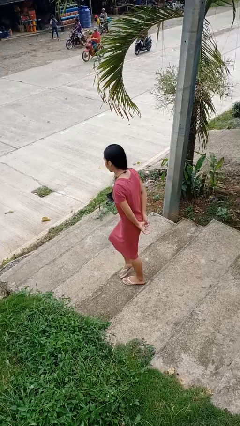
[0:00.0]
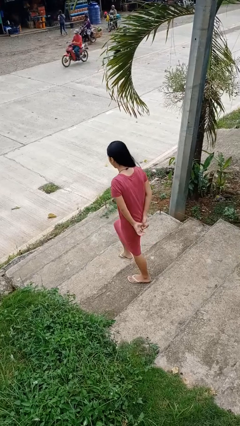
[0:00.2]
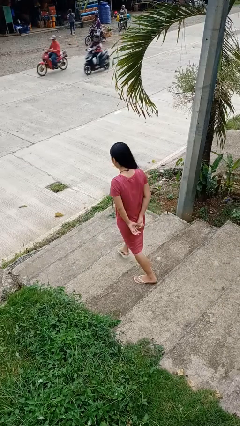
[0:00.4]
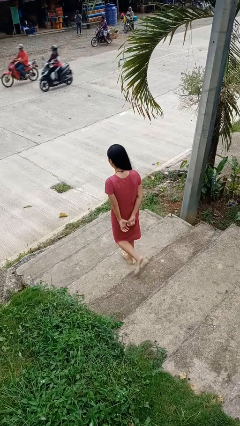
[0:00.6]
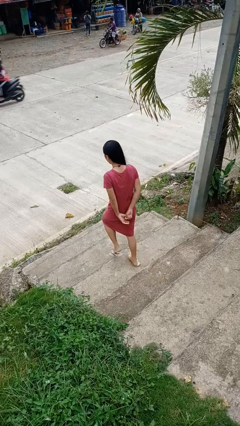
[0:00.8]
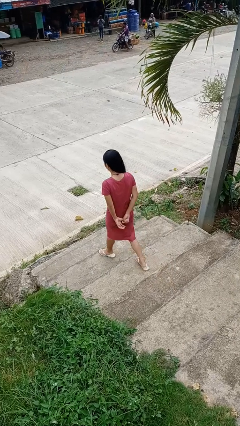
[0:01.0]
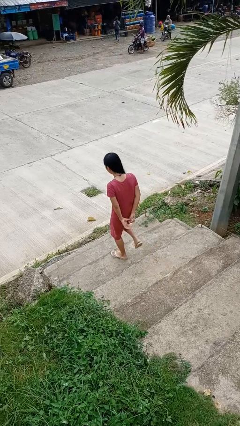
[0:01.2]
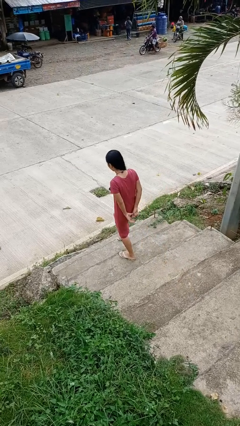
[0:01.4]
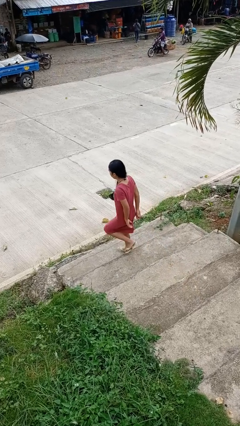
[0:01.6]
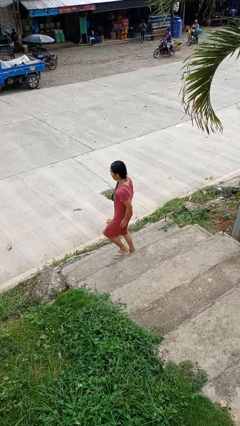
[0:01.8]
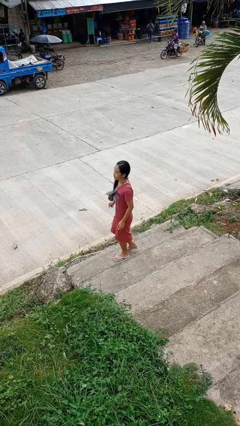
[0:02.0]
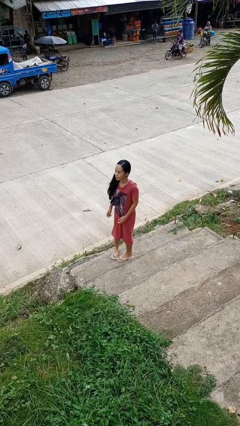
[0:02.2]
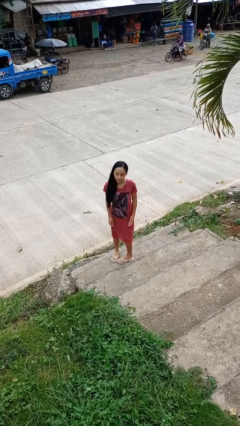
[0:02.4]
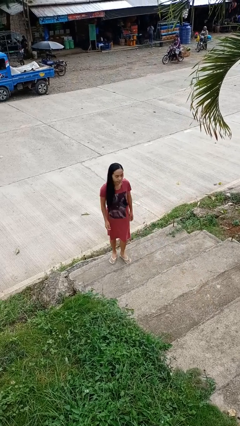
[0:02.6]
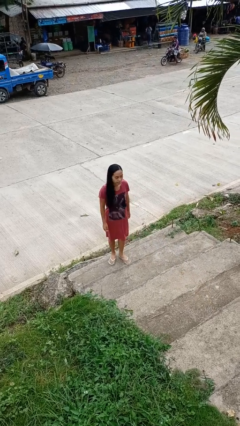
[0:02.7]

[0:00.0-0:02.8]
person climbs down stairs

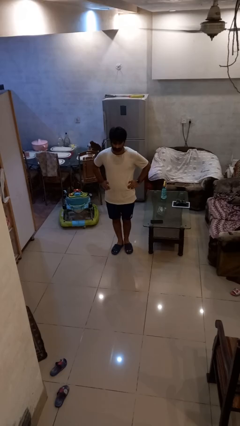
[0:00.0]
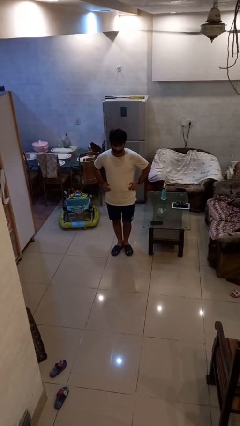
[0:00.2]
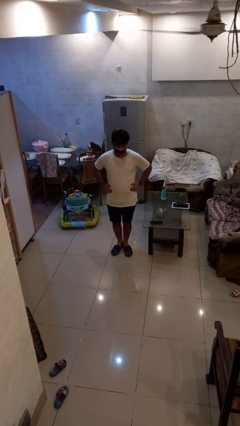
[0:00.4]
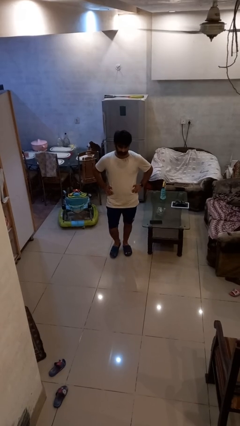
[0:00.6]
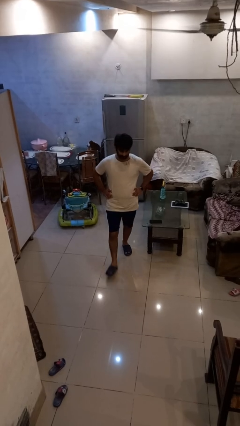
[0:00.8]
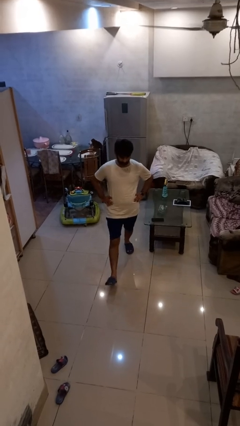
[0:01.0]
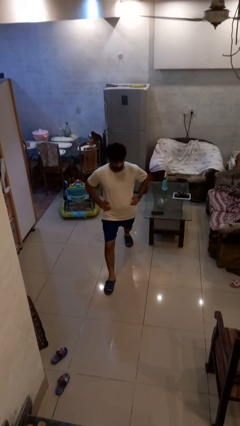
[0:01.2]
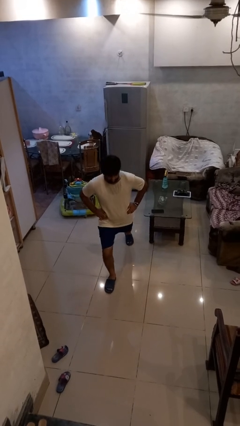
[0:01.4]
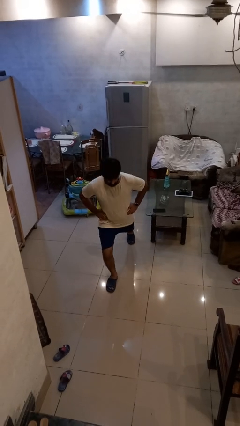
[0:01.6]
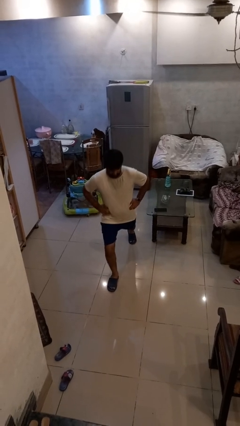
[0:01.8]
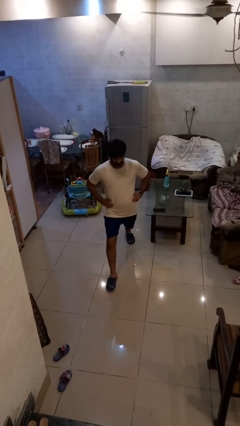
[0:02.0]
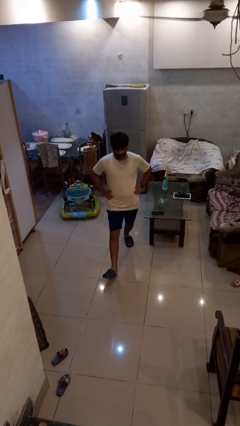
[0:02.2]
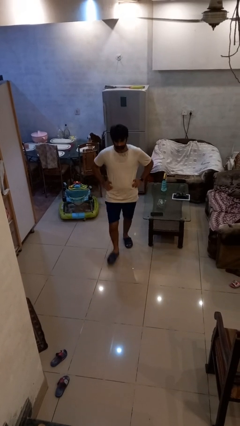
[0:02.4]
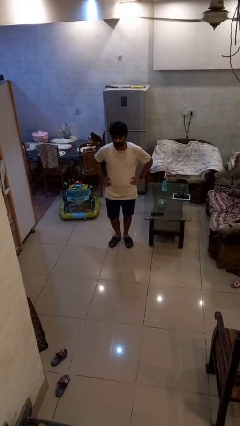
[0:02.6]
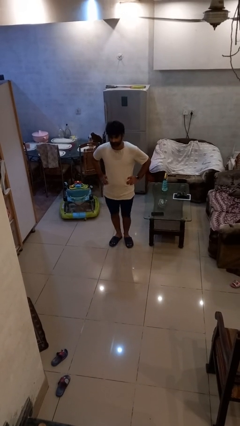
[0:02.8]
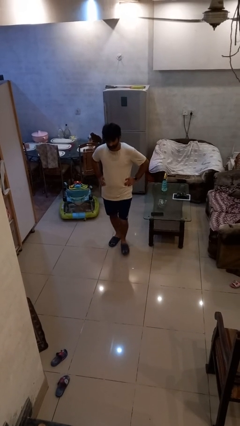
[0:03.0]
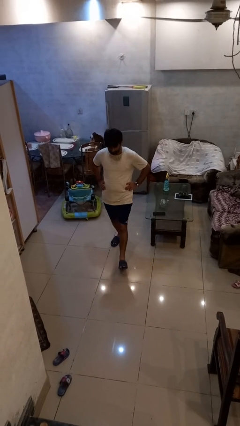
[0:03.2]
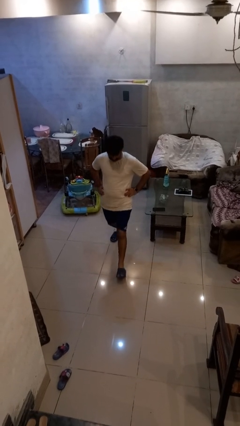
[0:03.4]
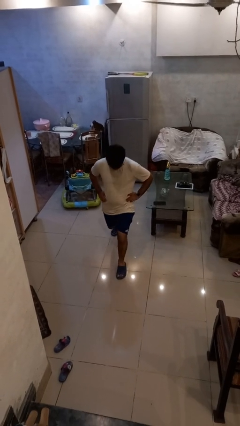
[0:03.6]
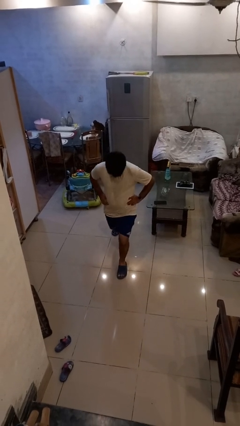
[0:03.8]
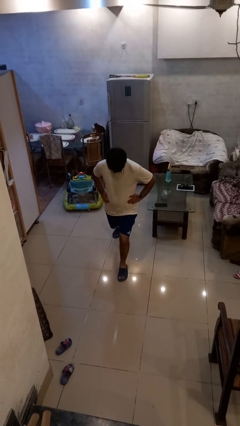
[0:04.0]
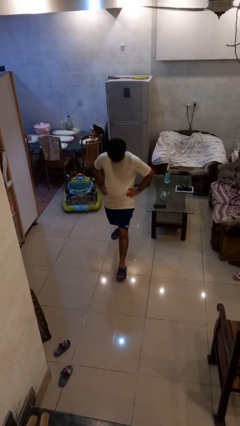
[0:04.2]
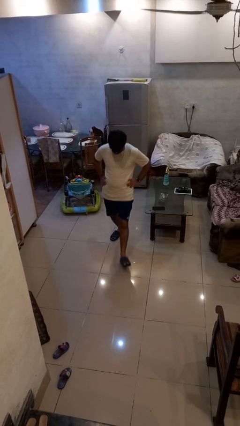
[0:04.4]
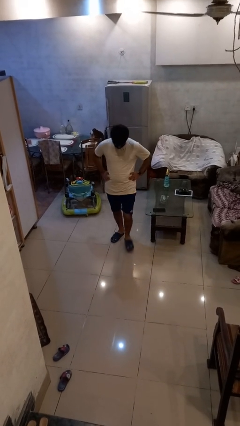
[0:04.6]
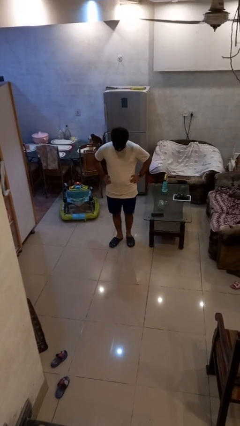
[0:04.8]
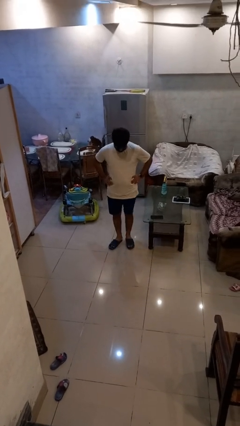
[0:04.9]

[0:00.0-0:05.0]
person exercises with lunges

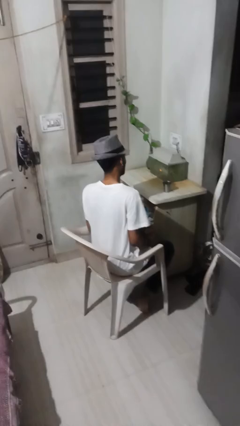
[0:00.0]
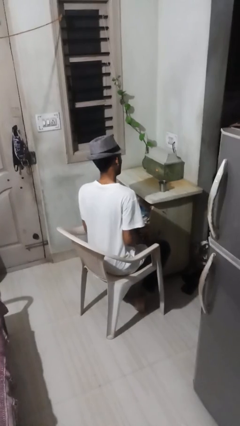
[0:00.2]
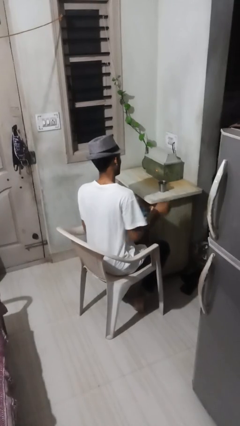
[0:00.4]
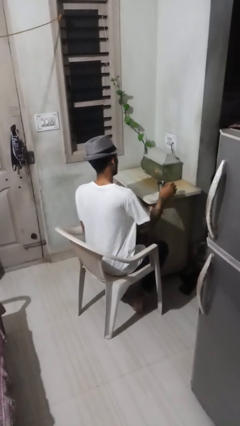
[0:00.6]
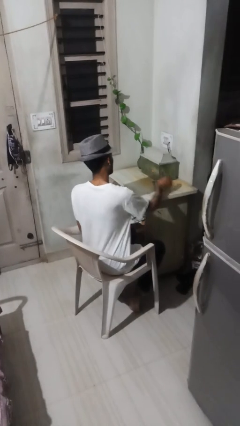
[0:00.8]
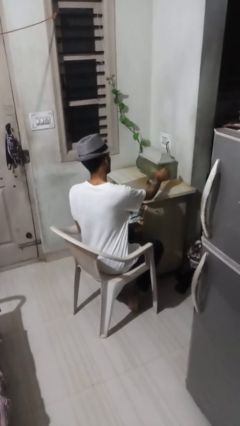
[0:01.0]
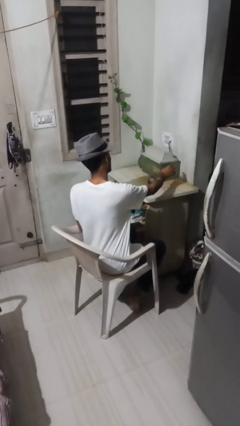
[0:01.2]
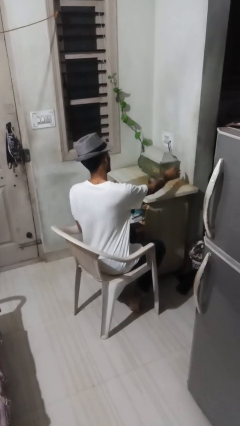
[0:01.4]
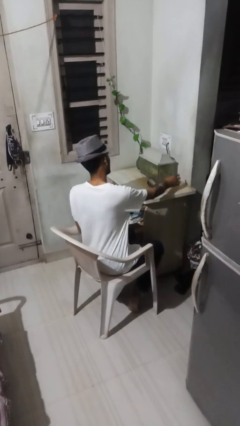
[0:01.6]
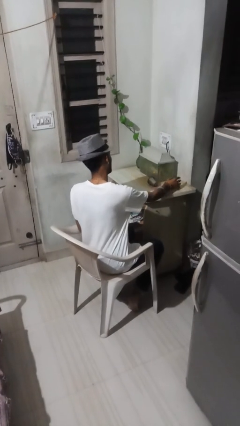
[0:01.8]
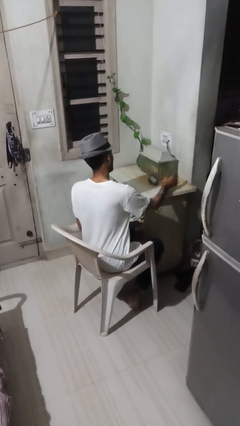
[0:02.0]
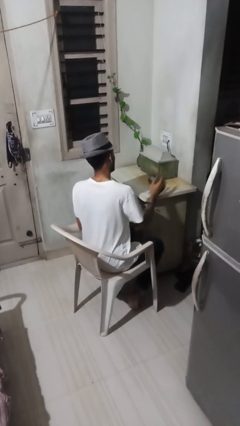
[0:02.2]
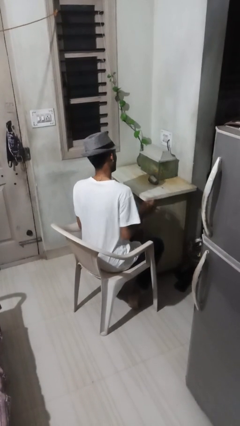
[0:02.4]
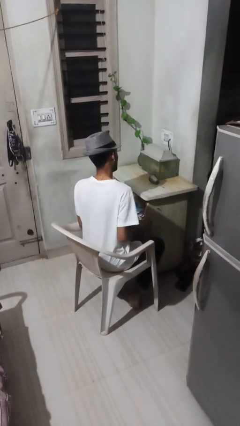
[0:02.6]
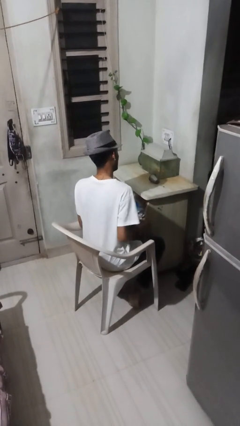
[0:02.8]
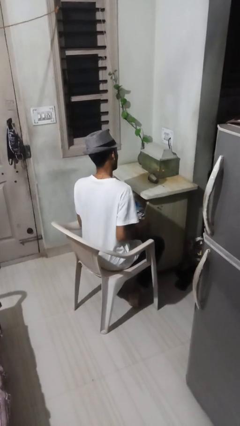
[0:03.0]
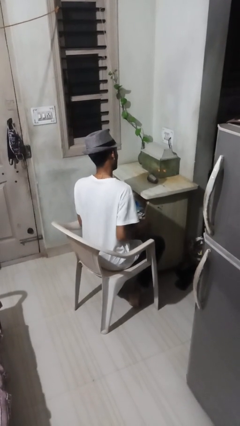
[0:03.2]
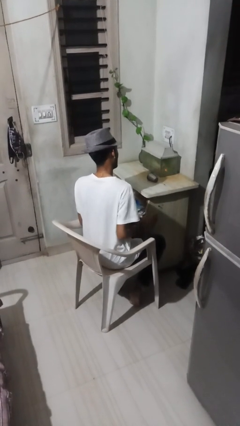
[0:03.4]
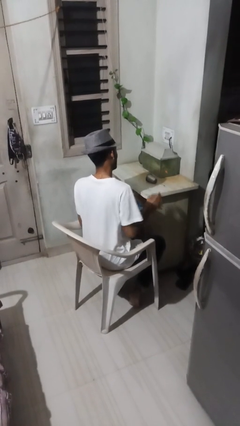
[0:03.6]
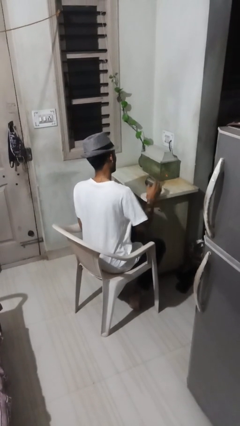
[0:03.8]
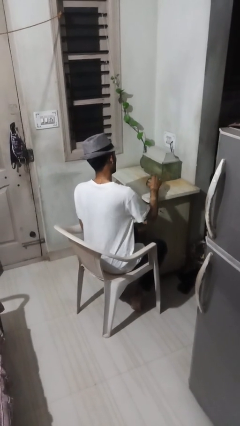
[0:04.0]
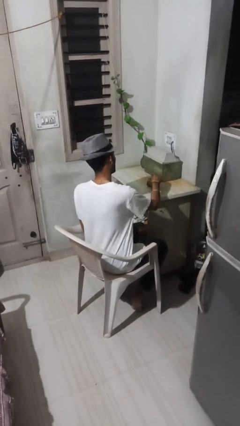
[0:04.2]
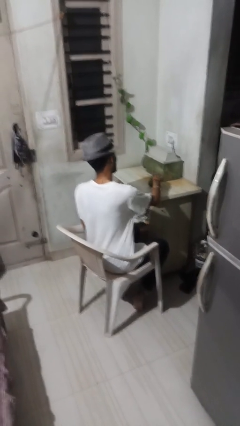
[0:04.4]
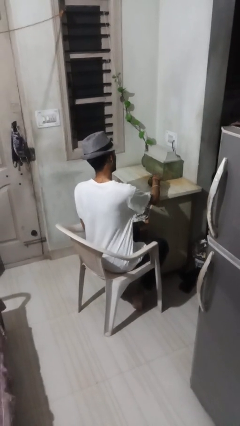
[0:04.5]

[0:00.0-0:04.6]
person knocks over glass

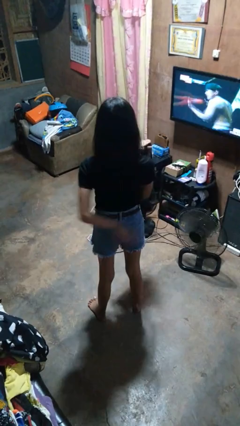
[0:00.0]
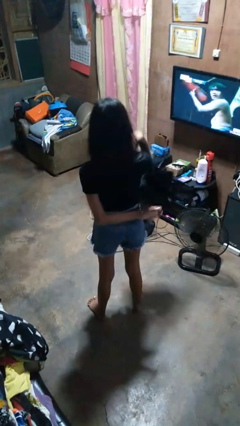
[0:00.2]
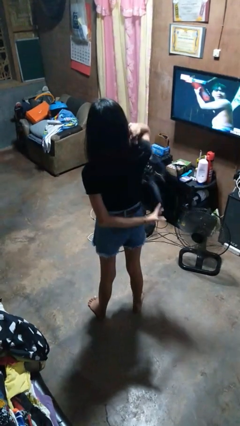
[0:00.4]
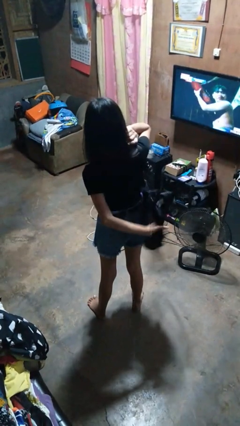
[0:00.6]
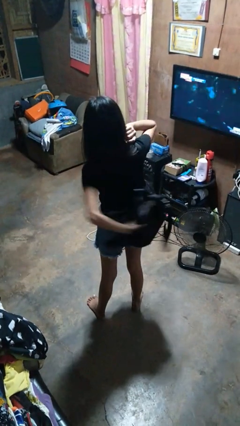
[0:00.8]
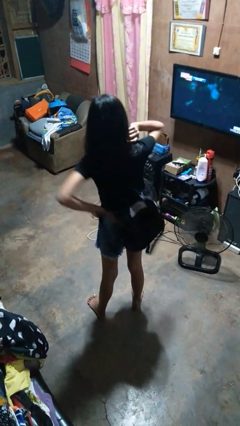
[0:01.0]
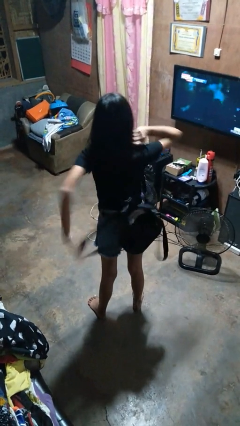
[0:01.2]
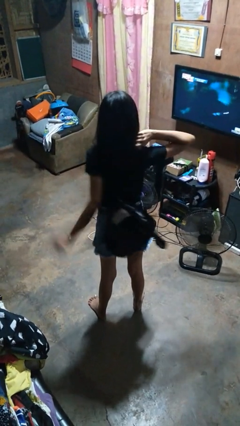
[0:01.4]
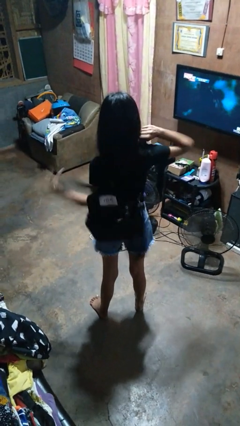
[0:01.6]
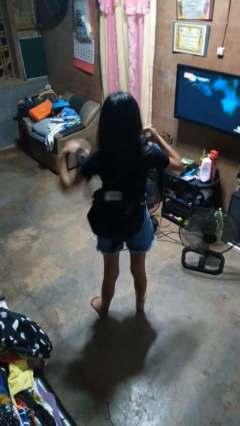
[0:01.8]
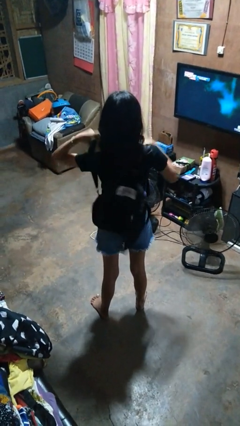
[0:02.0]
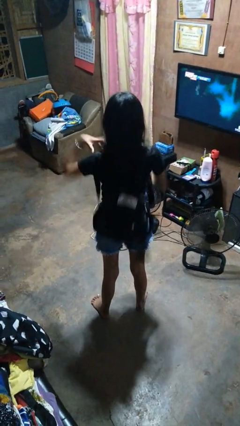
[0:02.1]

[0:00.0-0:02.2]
person puts on backpack

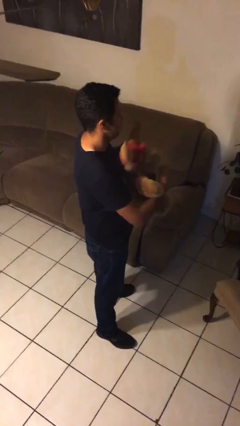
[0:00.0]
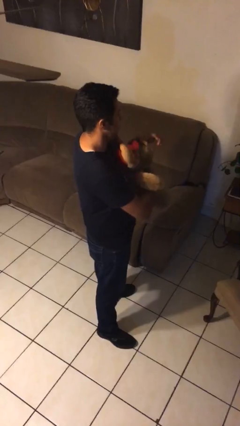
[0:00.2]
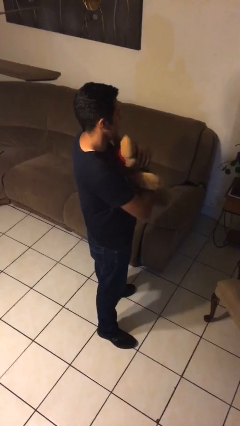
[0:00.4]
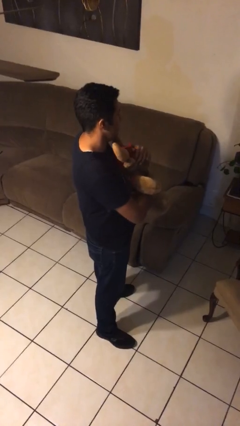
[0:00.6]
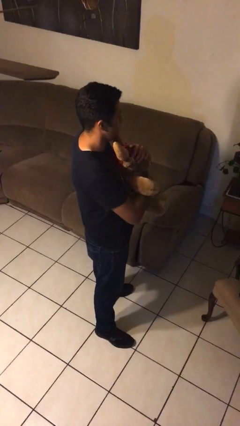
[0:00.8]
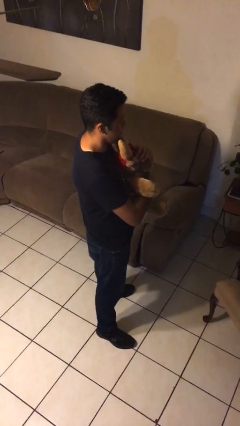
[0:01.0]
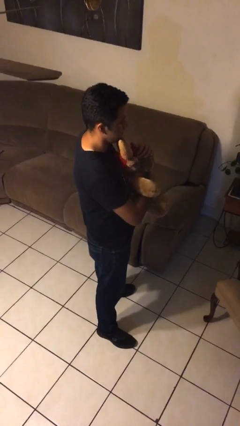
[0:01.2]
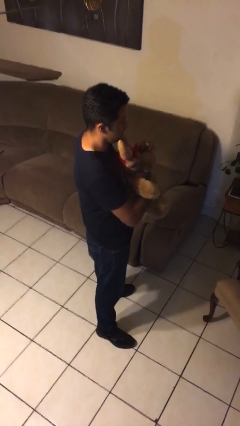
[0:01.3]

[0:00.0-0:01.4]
person hugs stuffed animal

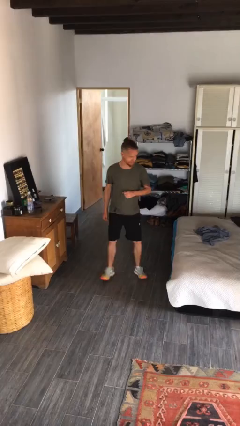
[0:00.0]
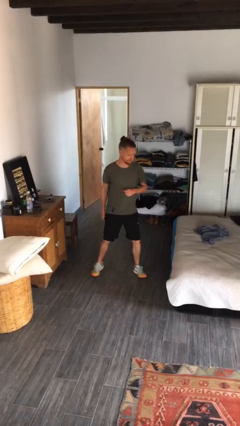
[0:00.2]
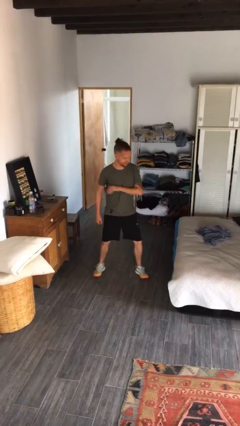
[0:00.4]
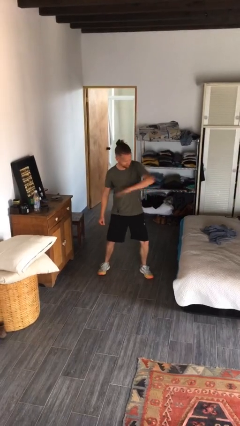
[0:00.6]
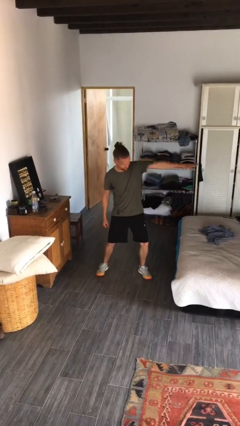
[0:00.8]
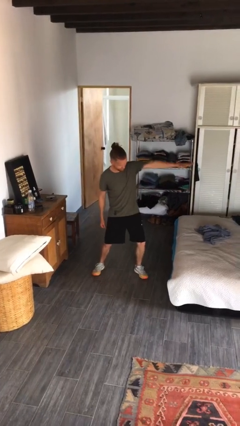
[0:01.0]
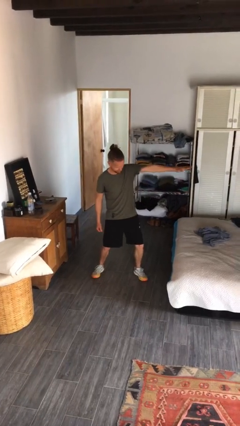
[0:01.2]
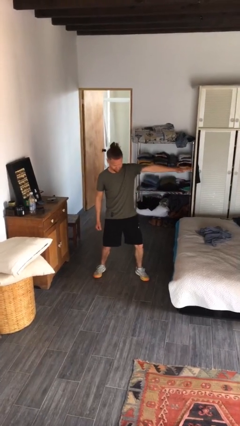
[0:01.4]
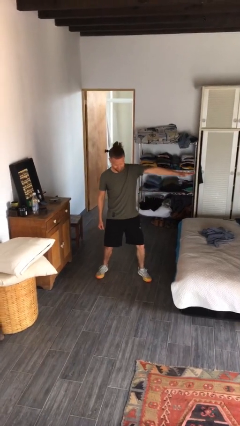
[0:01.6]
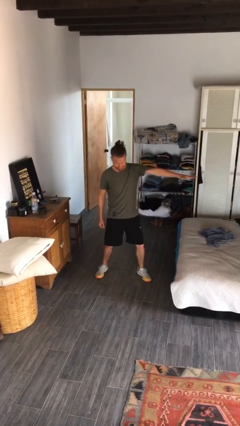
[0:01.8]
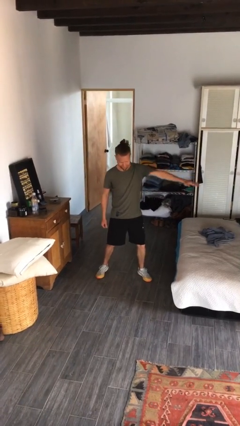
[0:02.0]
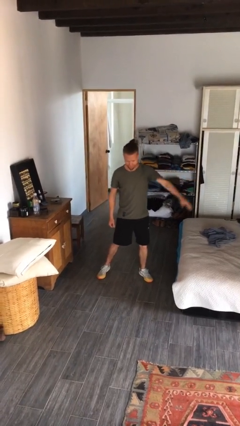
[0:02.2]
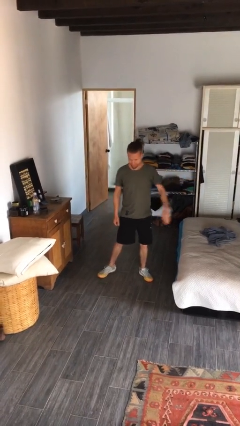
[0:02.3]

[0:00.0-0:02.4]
person karate chop
